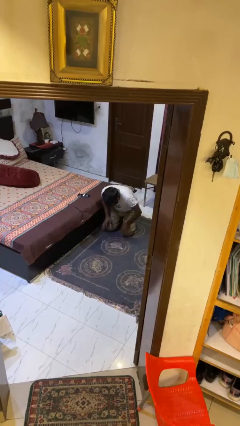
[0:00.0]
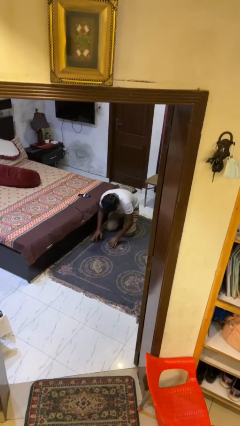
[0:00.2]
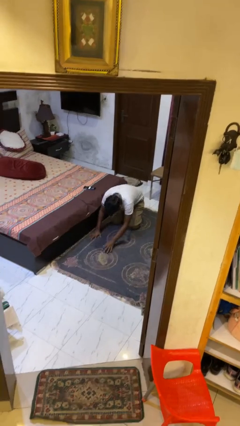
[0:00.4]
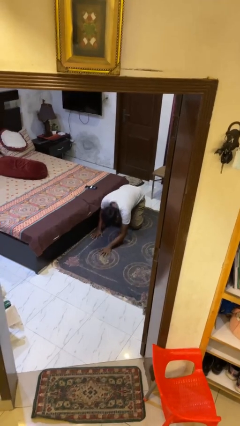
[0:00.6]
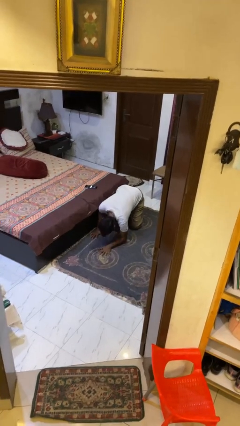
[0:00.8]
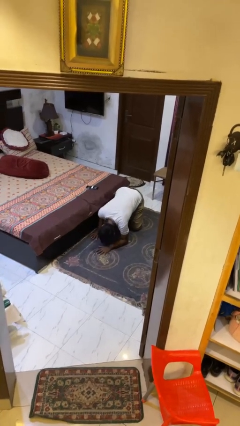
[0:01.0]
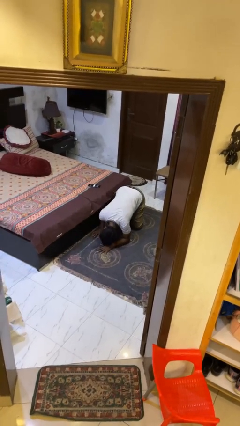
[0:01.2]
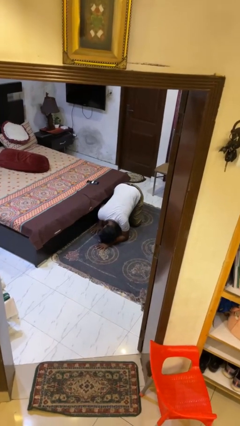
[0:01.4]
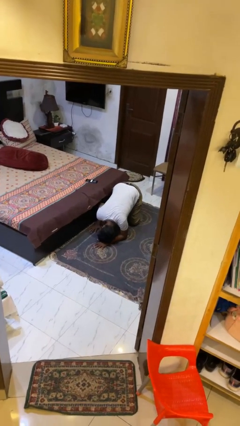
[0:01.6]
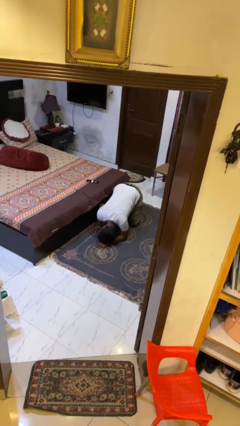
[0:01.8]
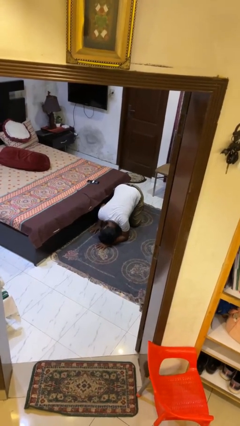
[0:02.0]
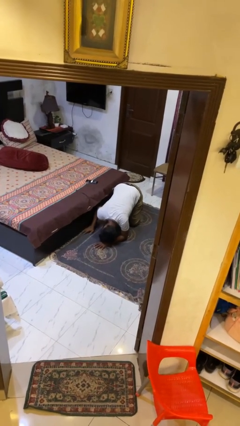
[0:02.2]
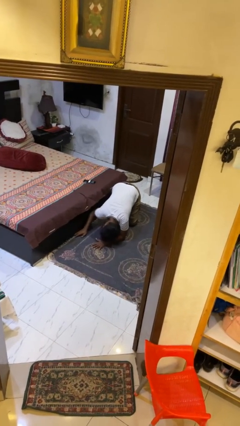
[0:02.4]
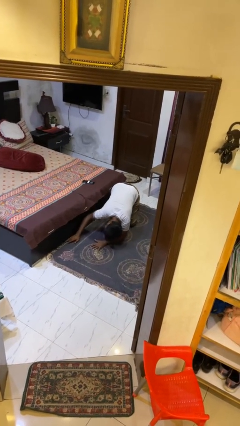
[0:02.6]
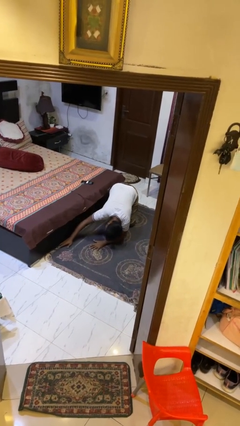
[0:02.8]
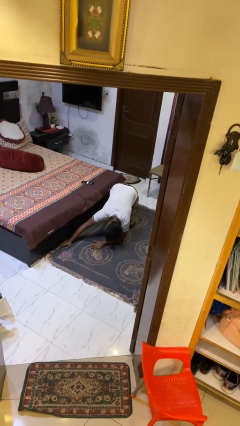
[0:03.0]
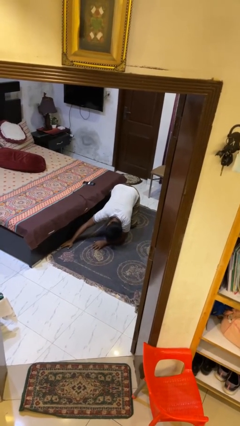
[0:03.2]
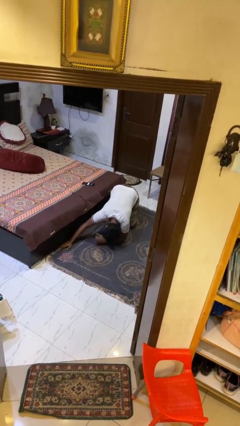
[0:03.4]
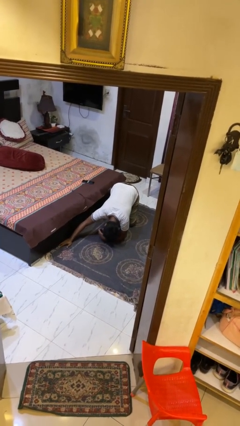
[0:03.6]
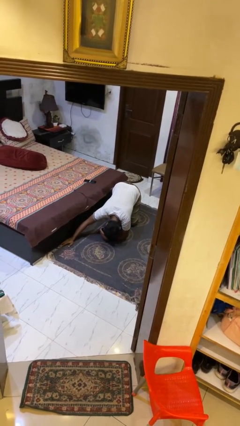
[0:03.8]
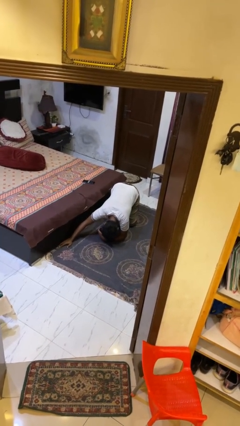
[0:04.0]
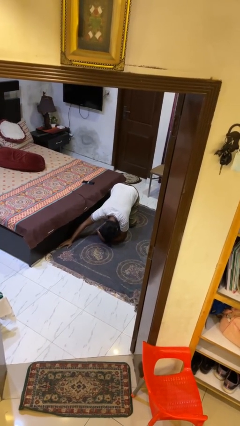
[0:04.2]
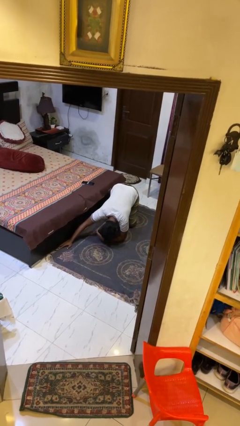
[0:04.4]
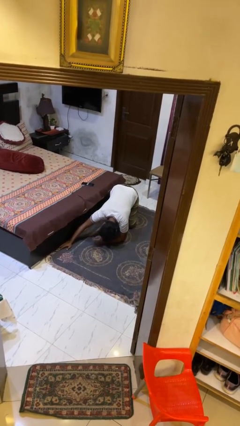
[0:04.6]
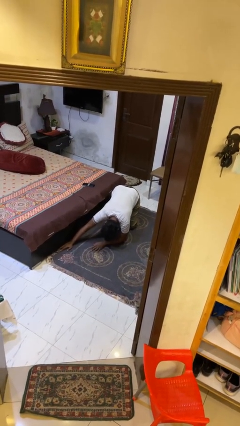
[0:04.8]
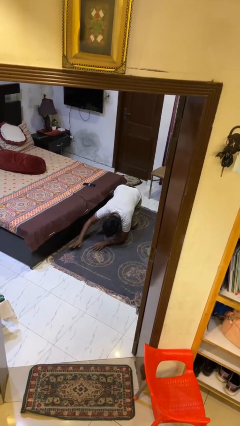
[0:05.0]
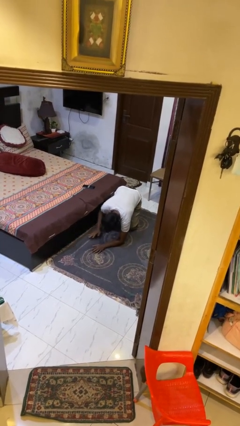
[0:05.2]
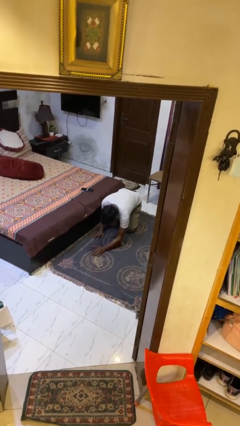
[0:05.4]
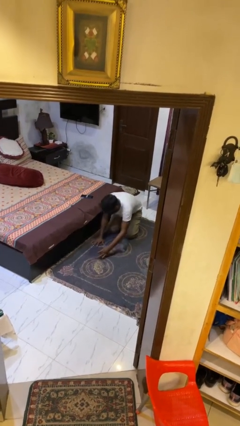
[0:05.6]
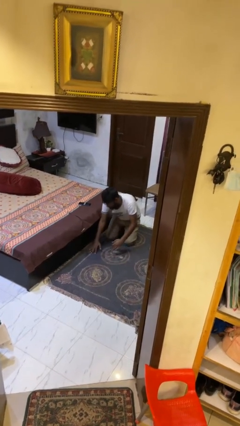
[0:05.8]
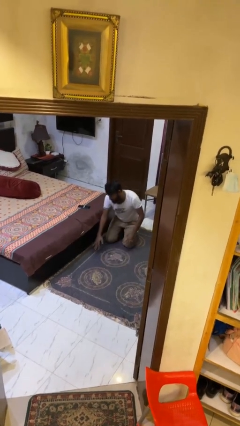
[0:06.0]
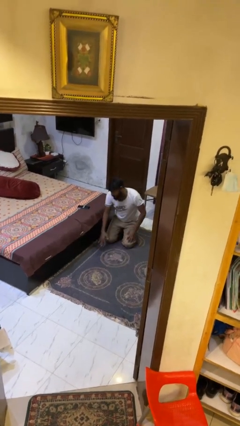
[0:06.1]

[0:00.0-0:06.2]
person searches under bed

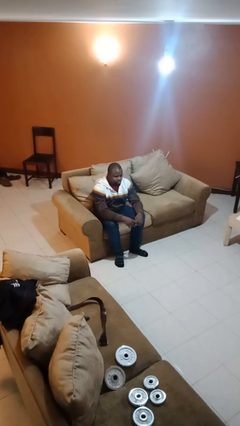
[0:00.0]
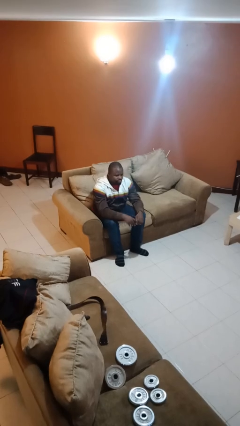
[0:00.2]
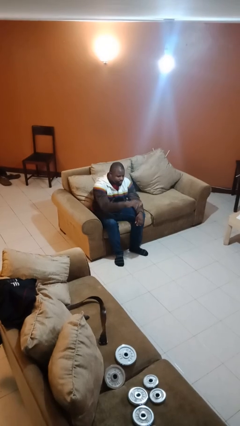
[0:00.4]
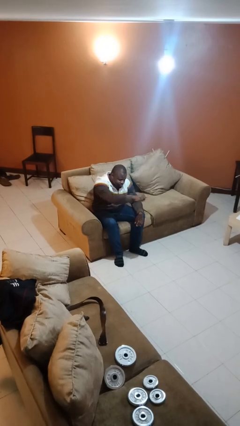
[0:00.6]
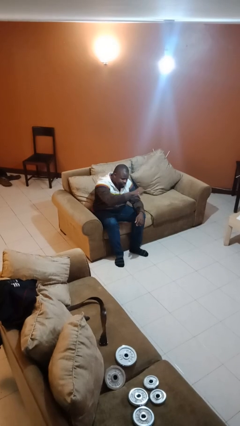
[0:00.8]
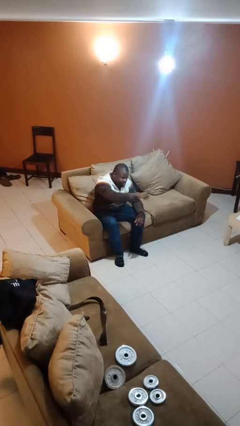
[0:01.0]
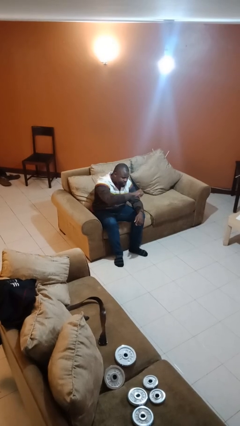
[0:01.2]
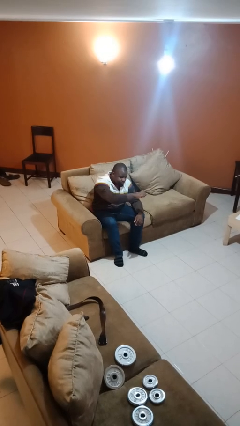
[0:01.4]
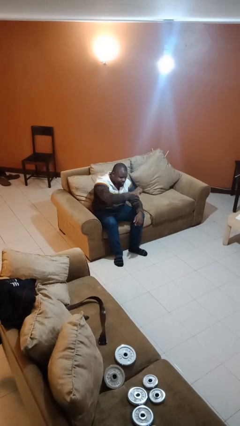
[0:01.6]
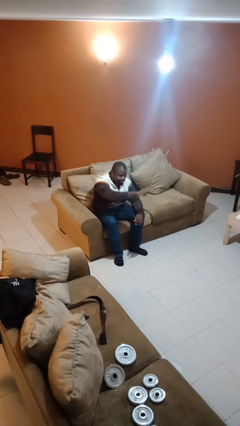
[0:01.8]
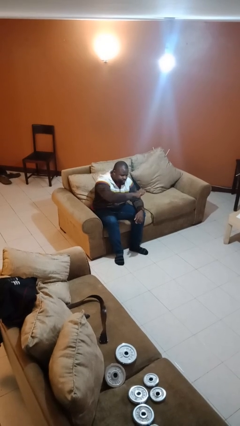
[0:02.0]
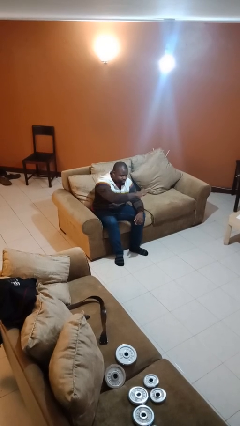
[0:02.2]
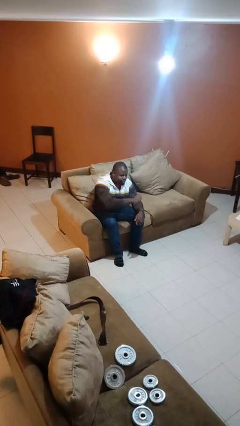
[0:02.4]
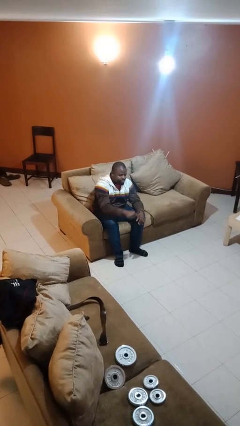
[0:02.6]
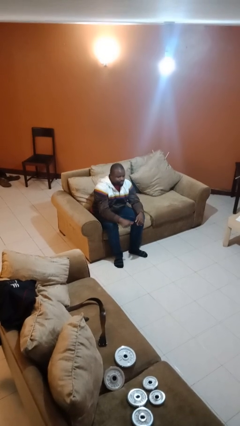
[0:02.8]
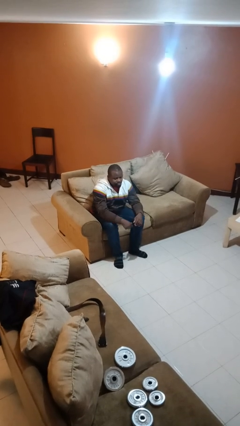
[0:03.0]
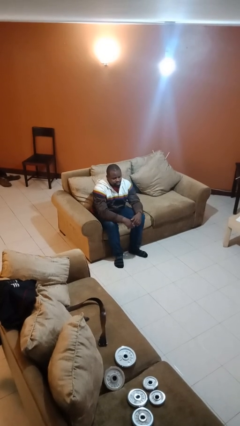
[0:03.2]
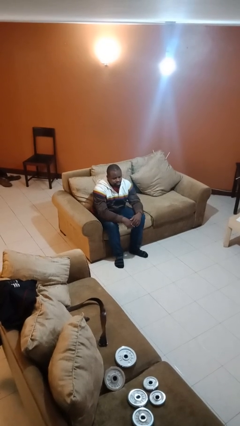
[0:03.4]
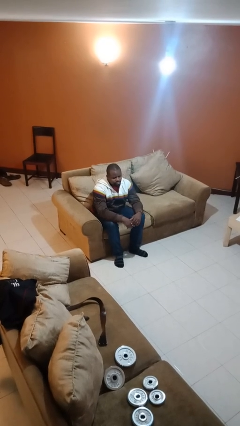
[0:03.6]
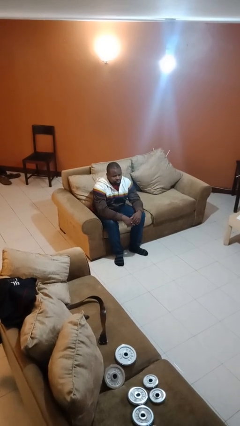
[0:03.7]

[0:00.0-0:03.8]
person gestures come here

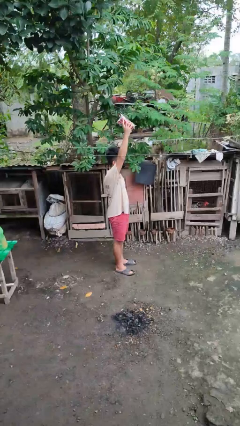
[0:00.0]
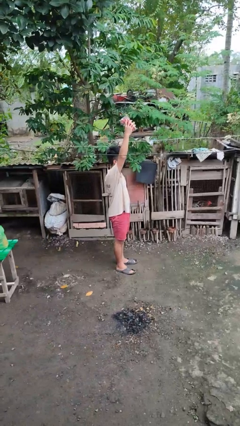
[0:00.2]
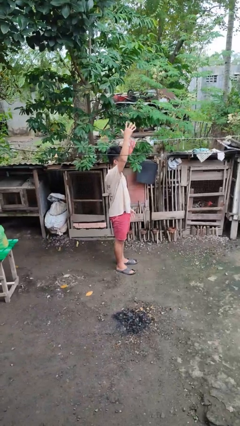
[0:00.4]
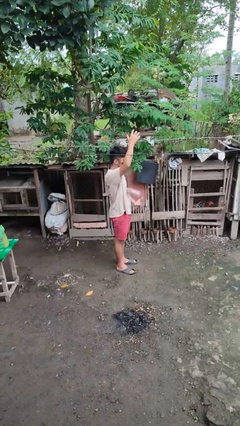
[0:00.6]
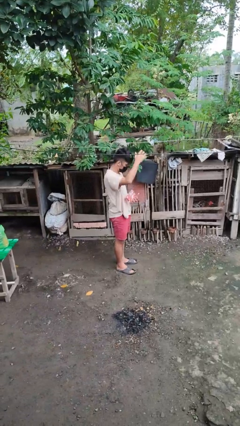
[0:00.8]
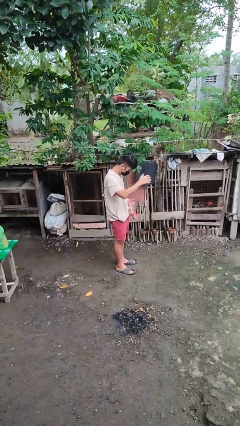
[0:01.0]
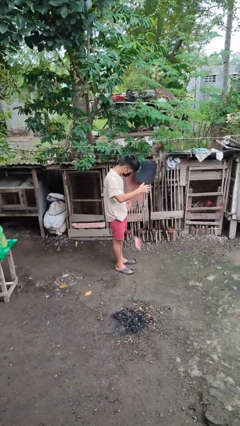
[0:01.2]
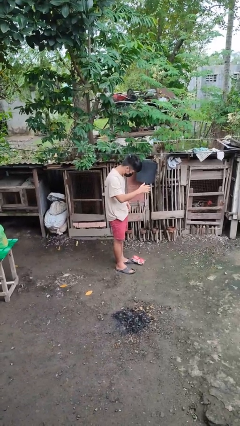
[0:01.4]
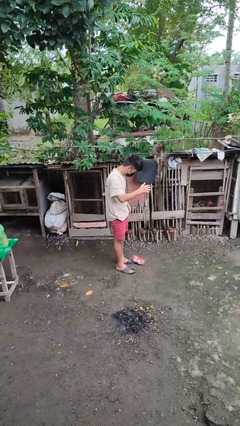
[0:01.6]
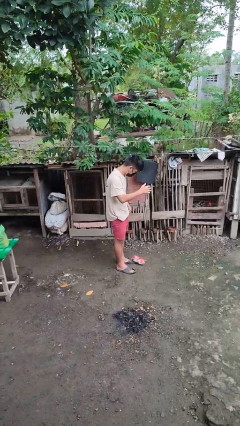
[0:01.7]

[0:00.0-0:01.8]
person drops object

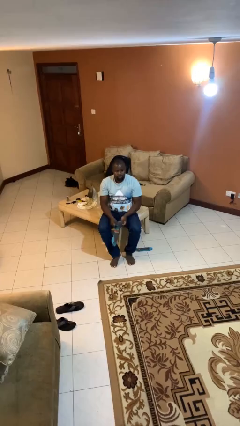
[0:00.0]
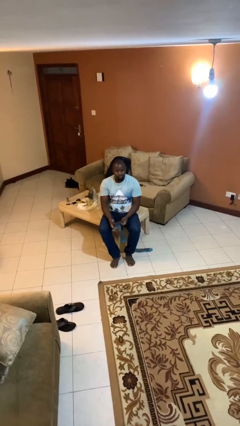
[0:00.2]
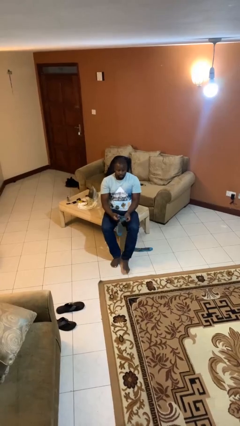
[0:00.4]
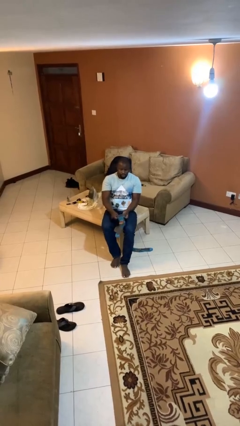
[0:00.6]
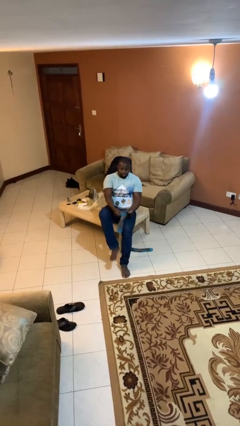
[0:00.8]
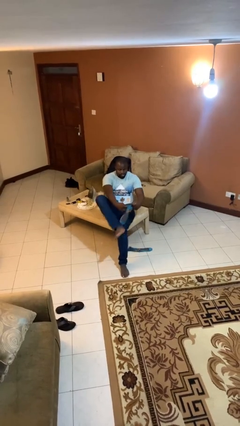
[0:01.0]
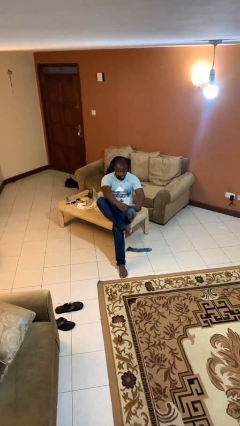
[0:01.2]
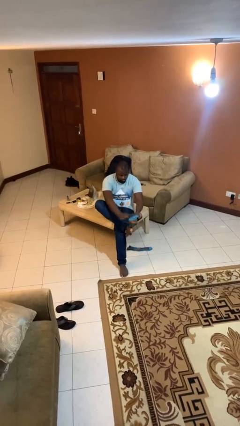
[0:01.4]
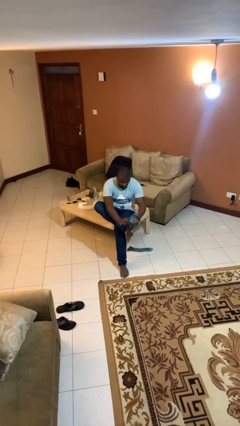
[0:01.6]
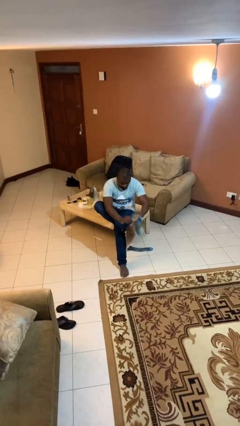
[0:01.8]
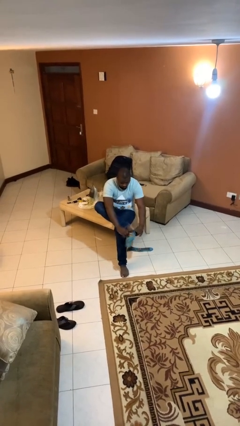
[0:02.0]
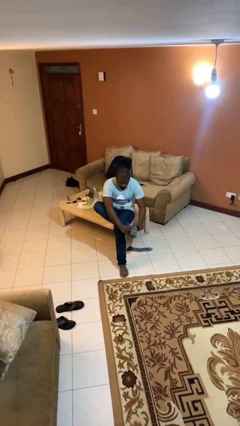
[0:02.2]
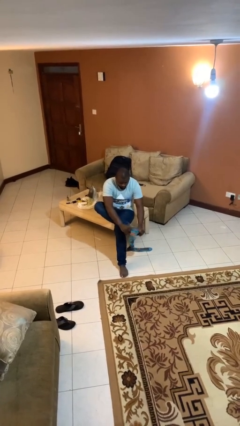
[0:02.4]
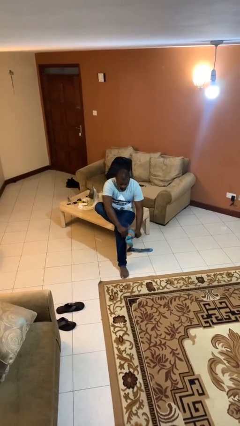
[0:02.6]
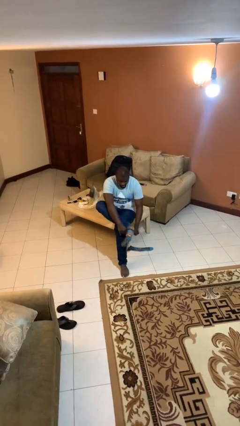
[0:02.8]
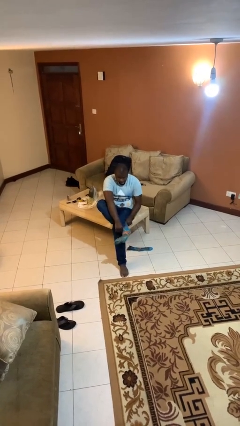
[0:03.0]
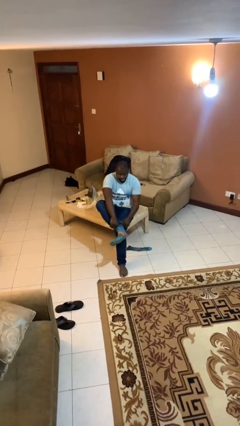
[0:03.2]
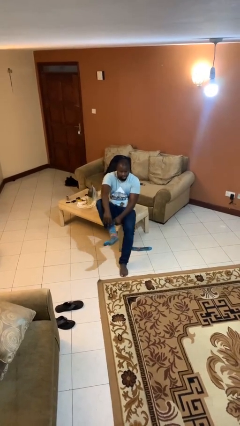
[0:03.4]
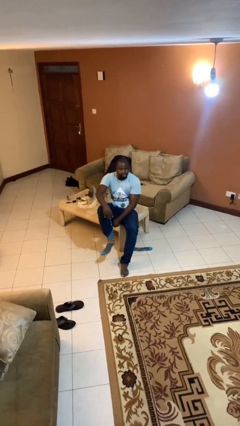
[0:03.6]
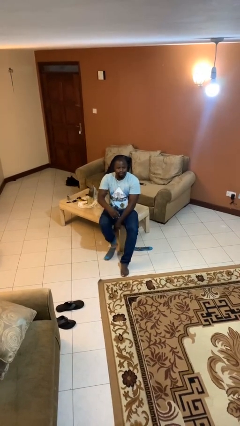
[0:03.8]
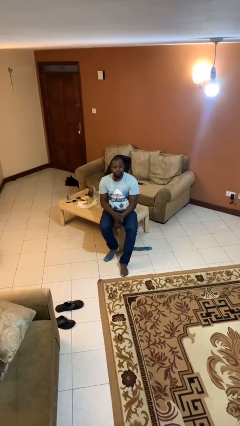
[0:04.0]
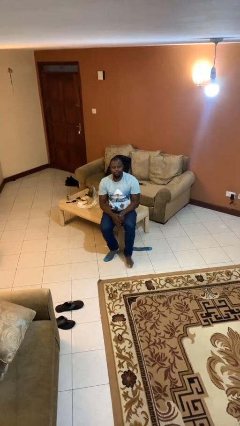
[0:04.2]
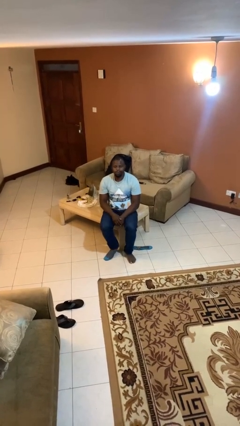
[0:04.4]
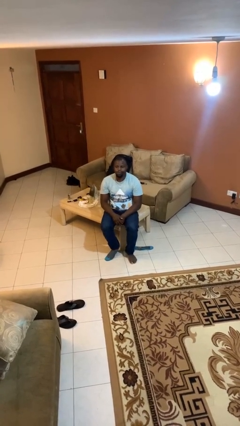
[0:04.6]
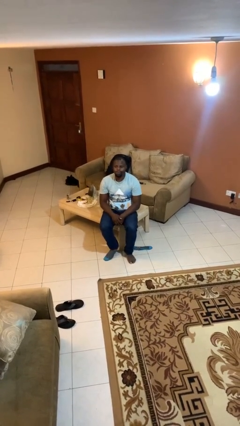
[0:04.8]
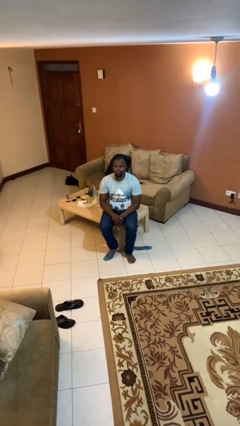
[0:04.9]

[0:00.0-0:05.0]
person puts on socks

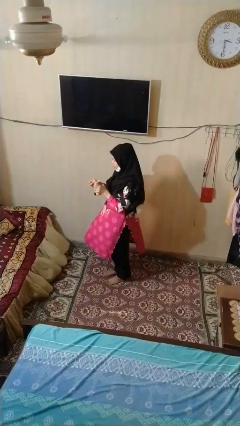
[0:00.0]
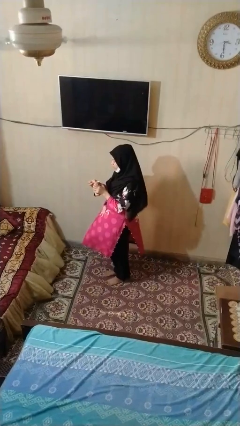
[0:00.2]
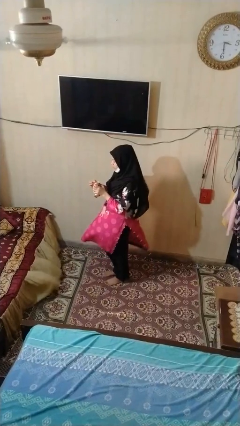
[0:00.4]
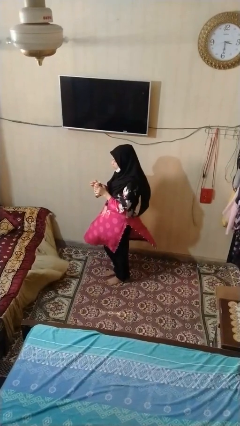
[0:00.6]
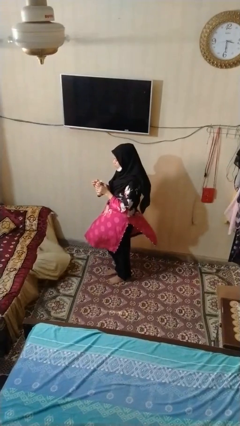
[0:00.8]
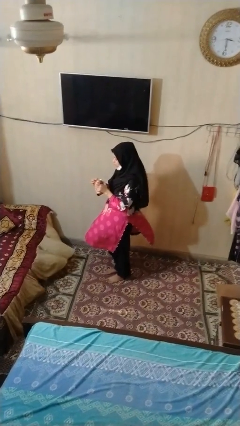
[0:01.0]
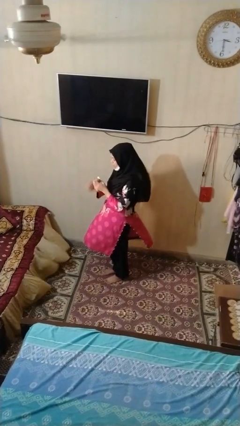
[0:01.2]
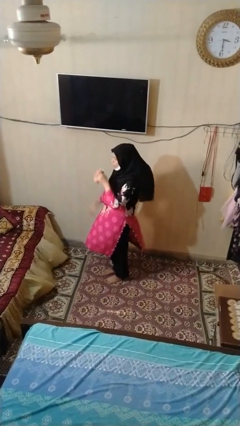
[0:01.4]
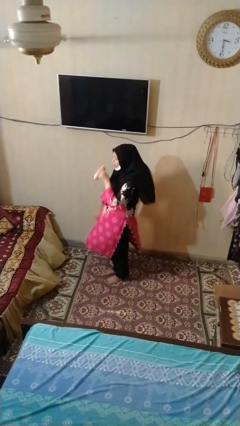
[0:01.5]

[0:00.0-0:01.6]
person opens beverage can
